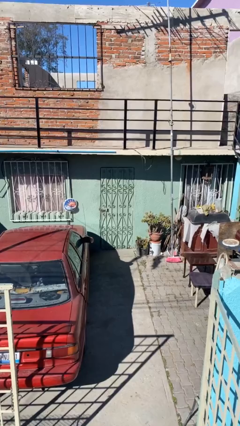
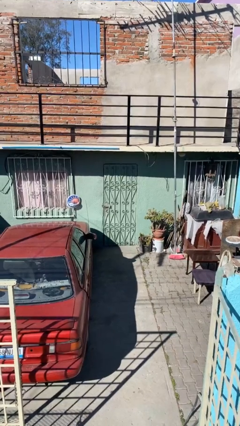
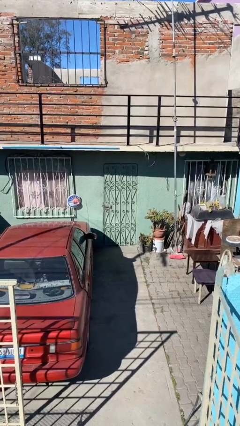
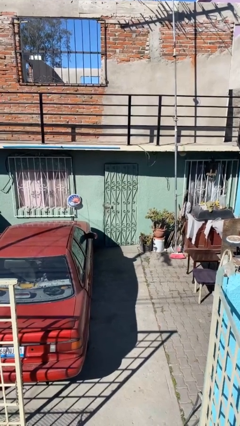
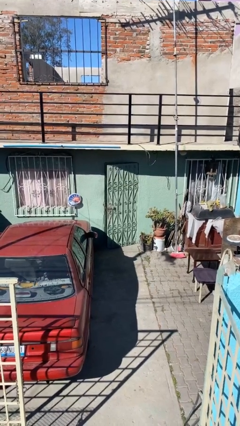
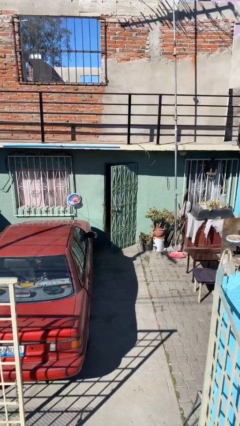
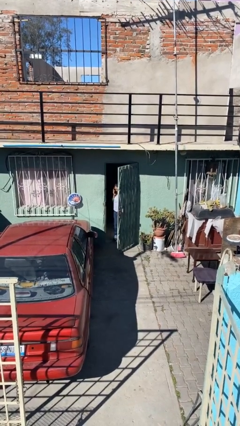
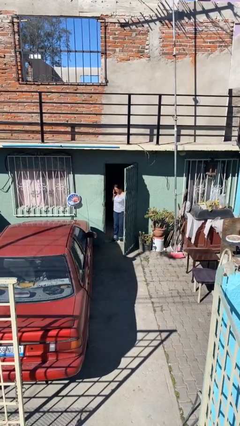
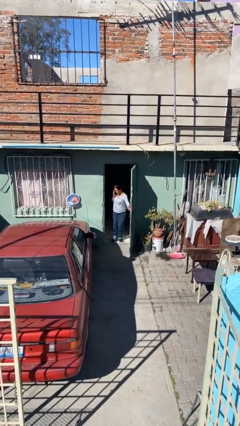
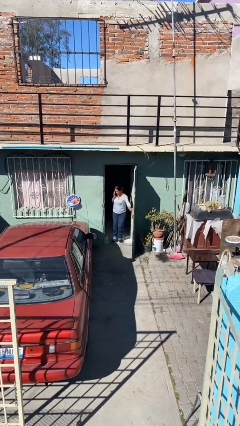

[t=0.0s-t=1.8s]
person opens facility door

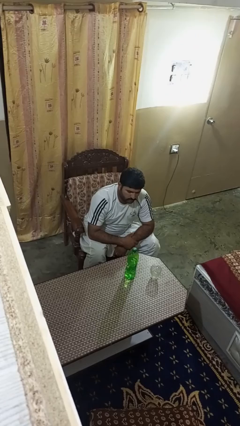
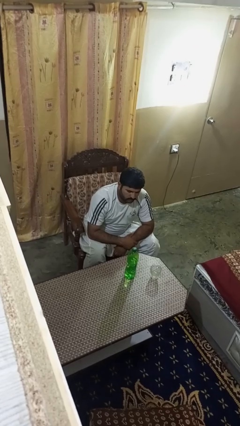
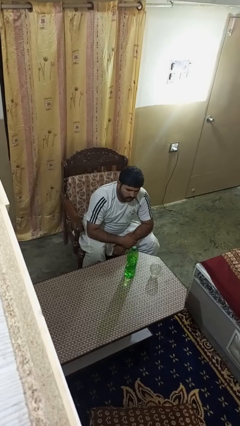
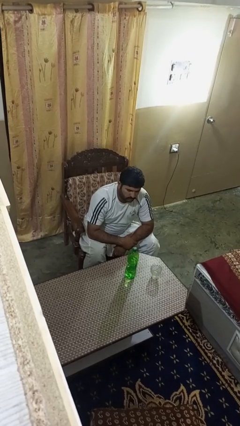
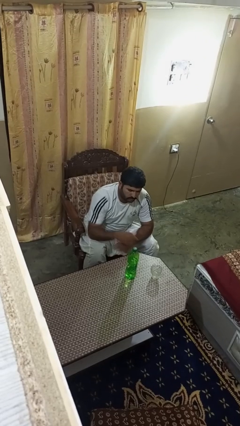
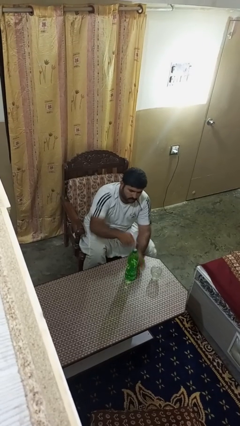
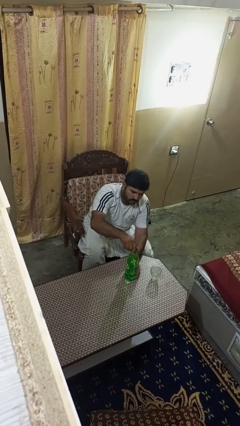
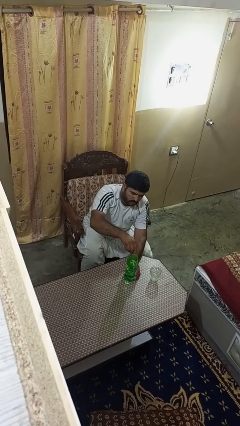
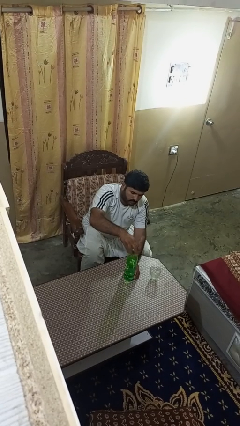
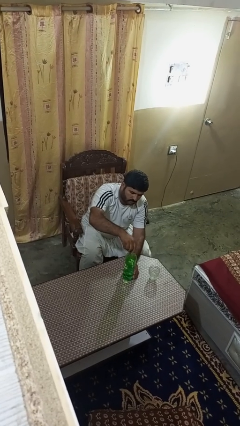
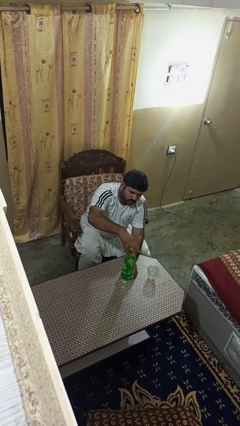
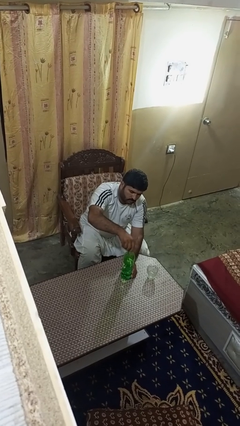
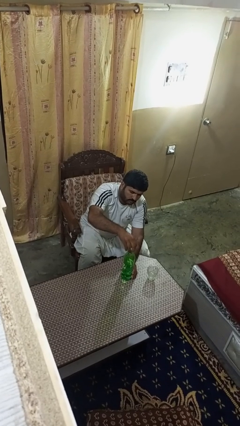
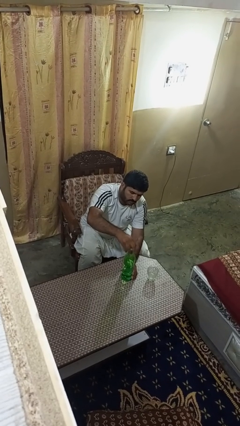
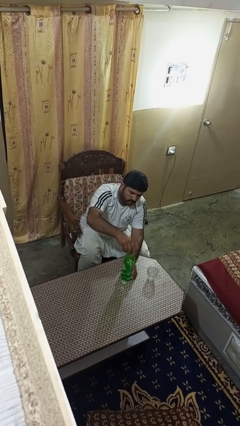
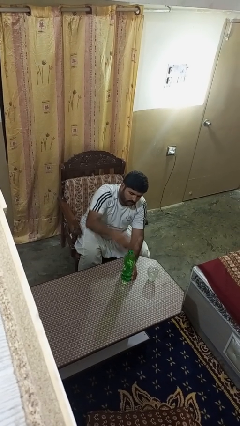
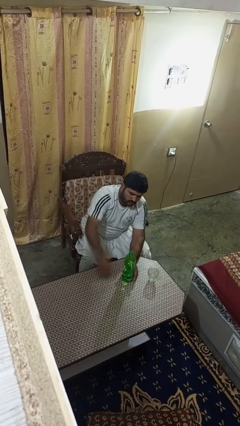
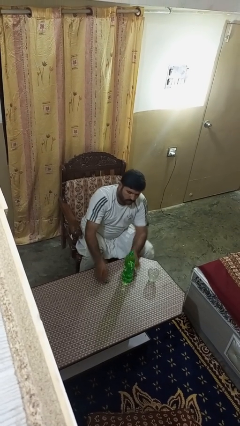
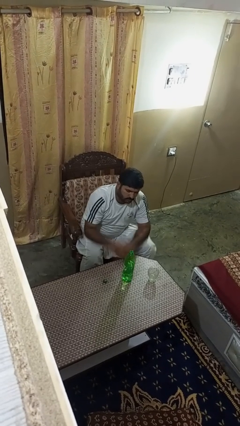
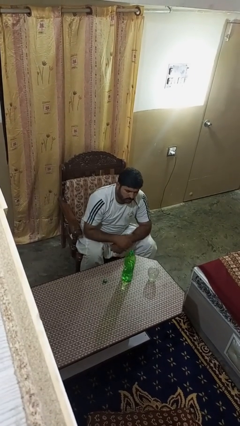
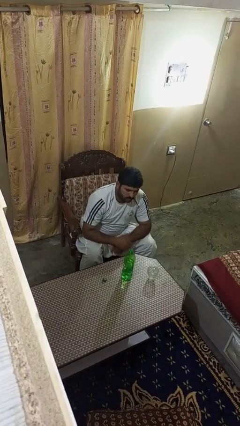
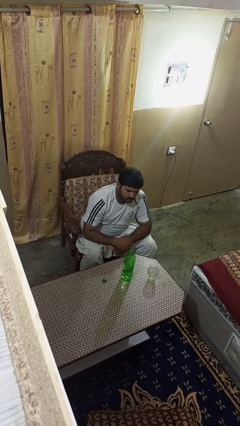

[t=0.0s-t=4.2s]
person unscrews lid from bottle

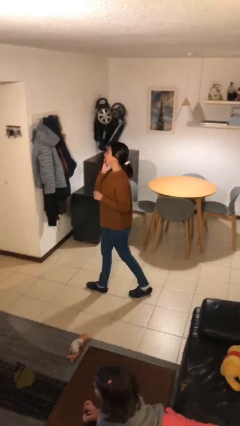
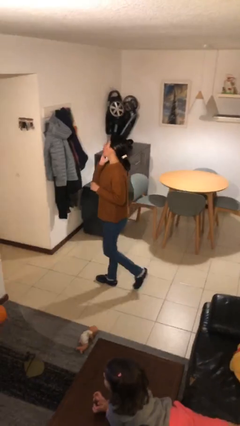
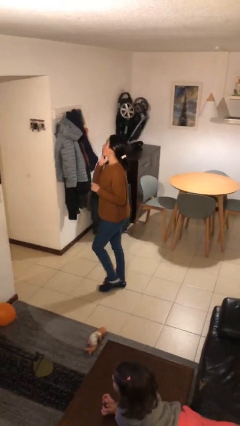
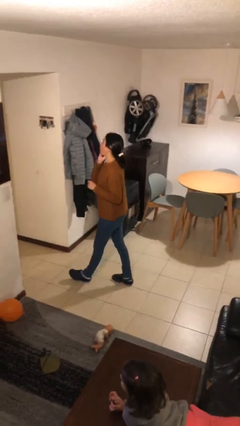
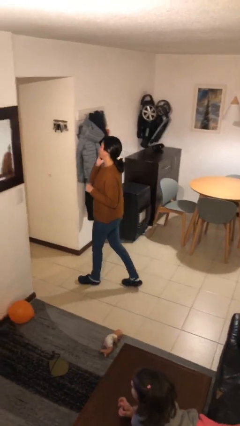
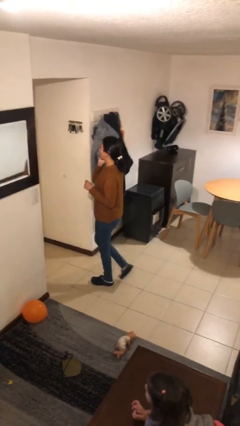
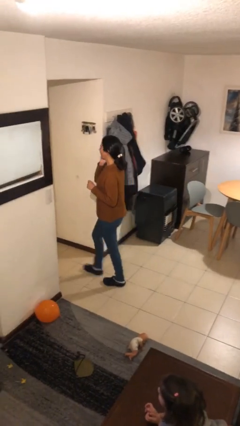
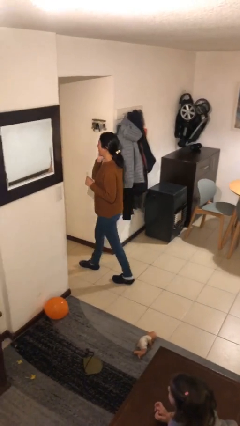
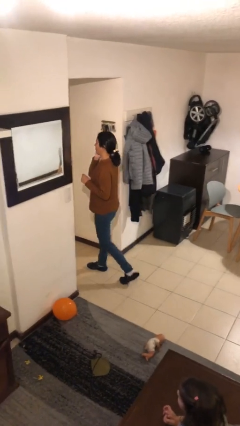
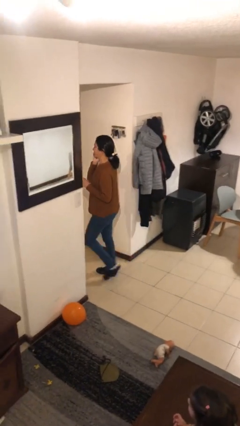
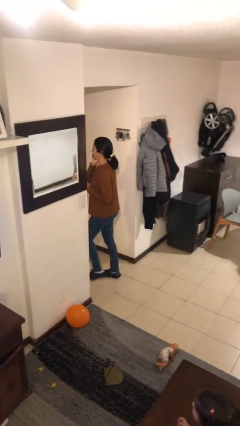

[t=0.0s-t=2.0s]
person talks on phone

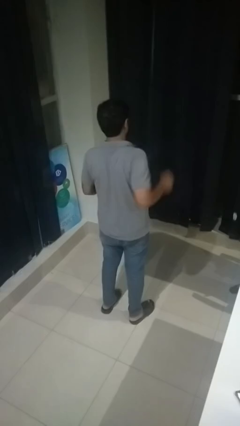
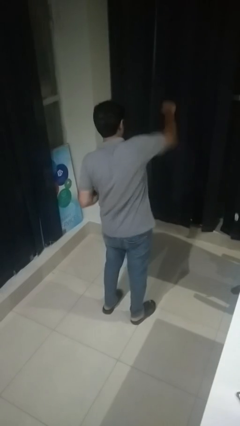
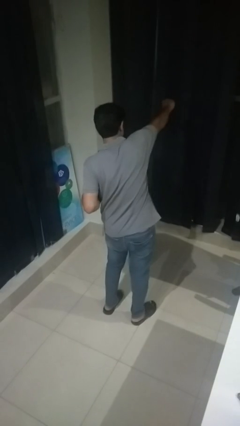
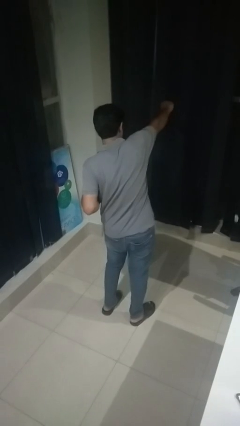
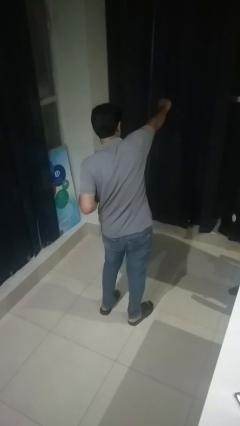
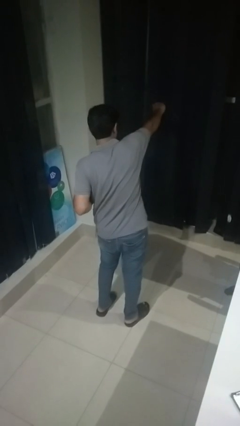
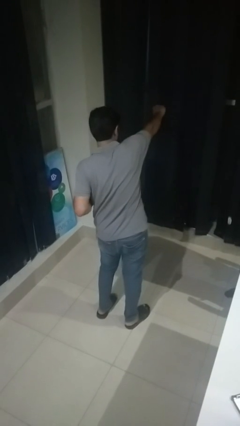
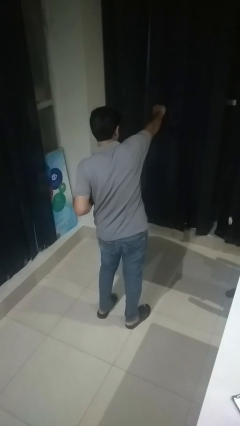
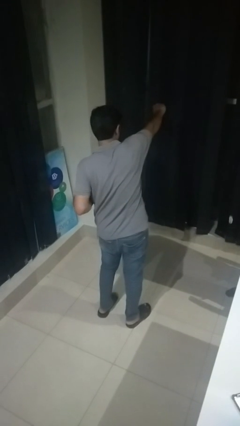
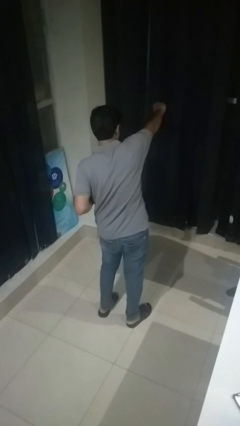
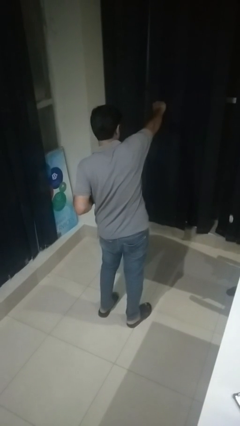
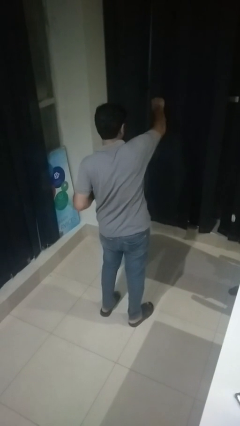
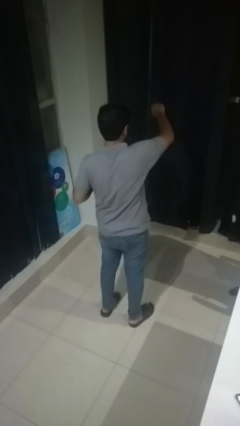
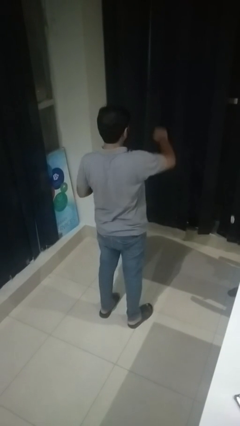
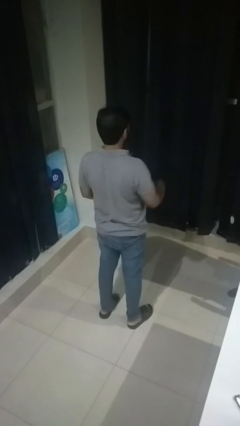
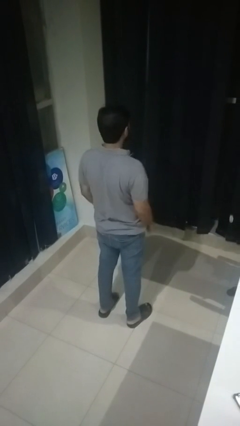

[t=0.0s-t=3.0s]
person punches

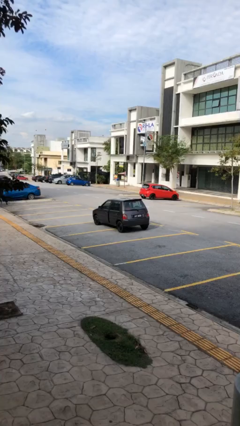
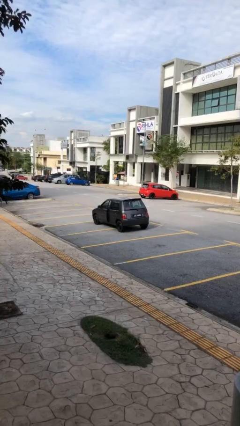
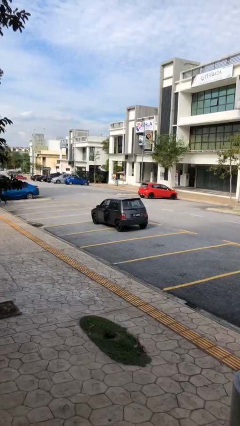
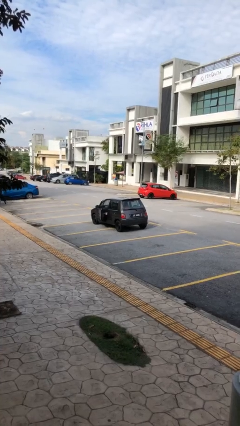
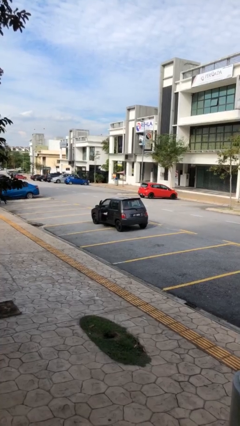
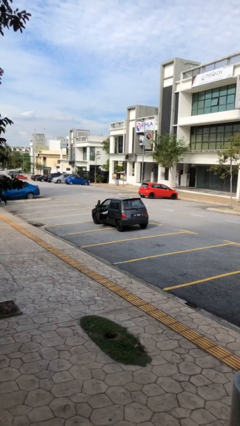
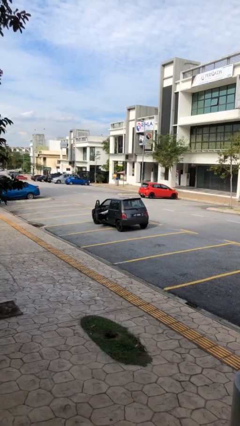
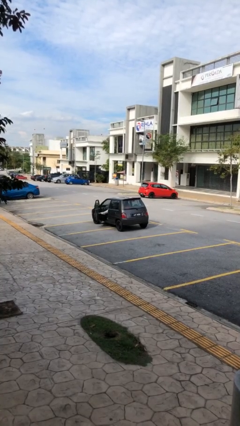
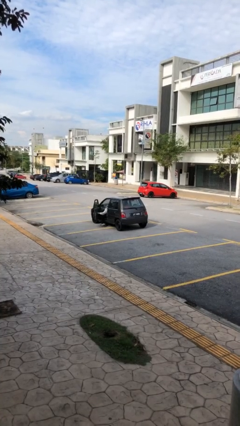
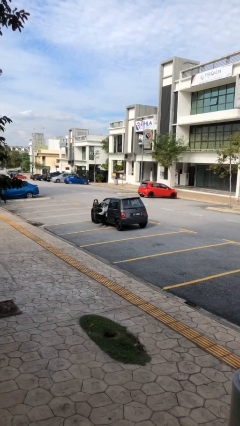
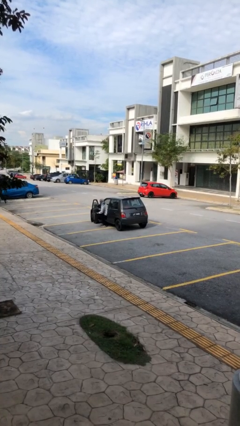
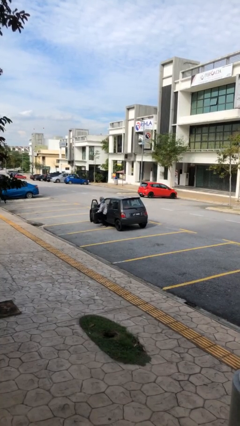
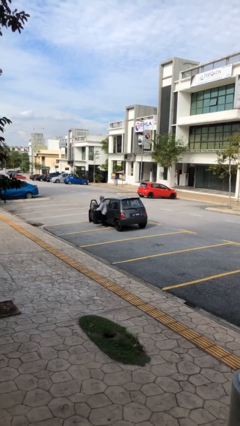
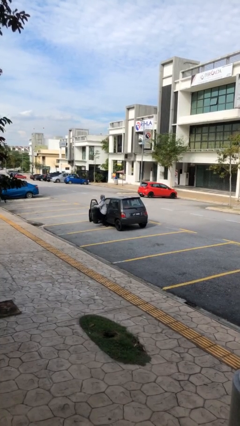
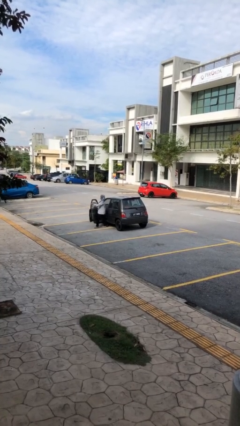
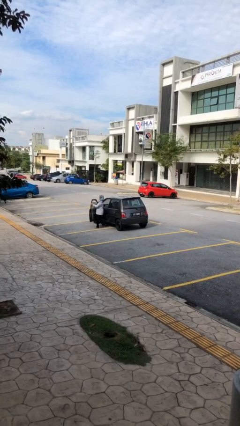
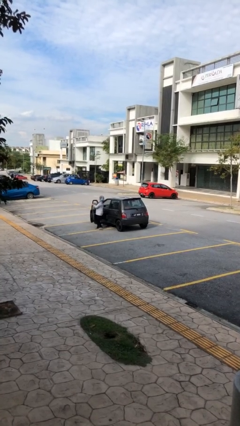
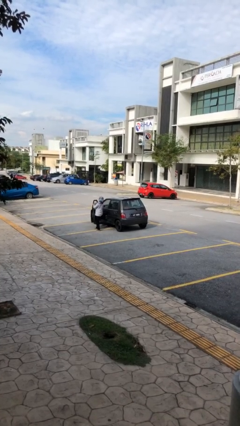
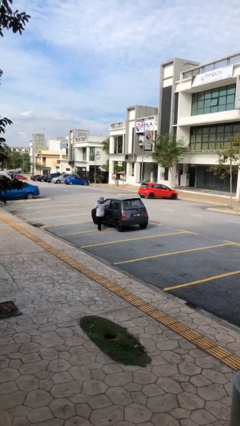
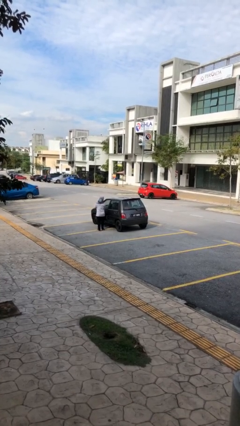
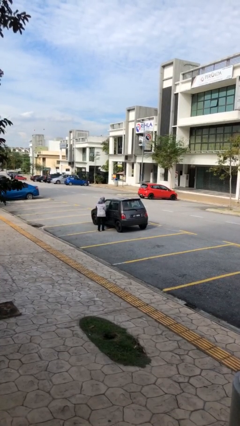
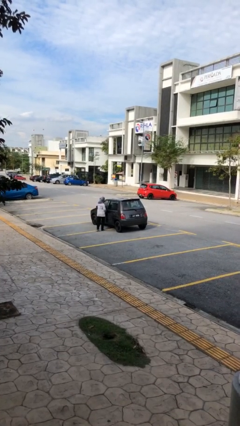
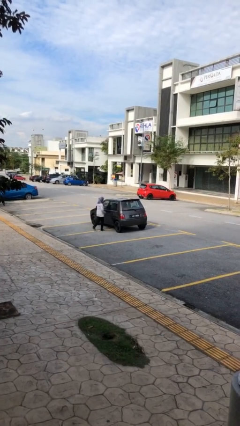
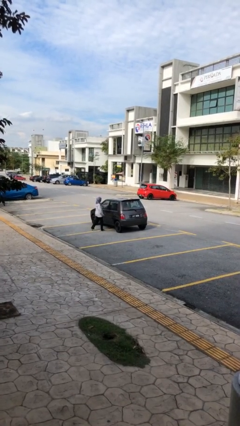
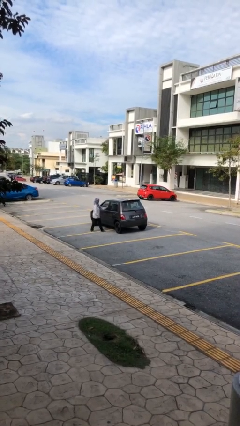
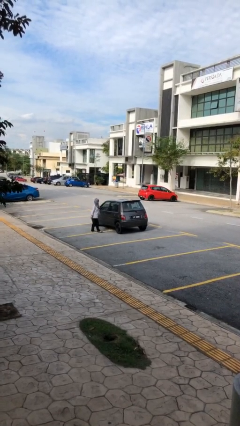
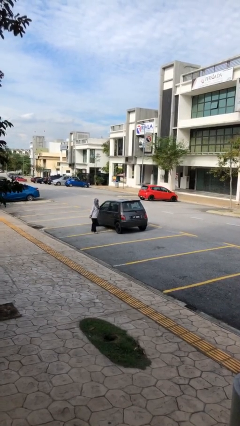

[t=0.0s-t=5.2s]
car drops off person

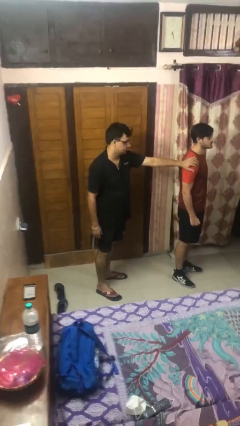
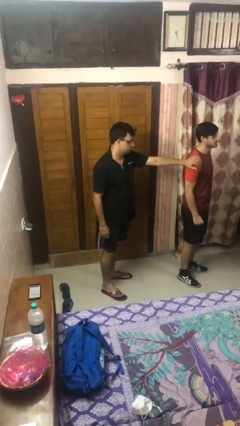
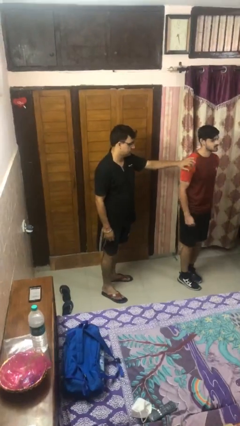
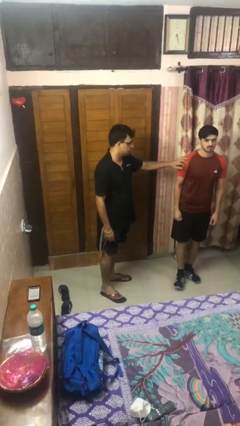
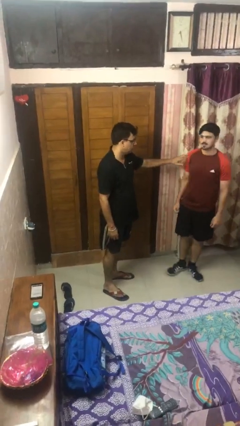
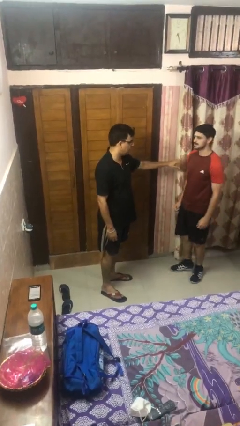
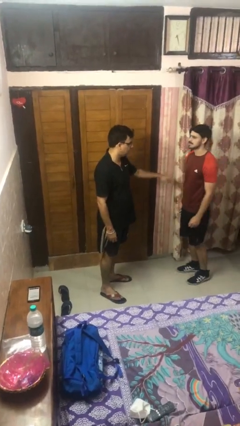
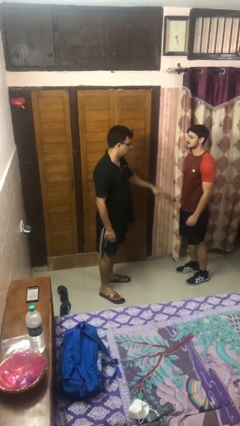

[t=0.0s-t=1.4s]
person spins person around
